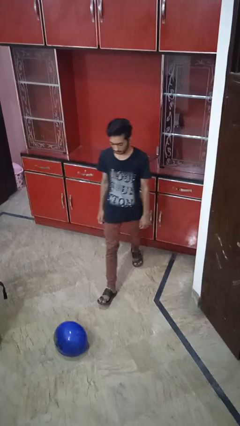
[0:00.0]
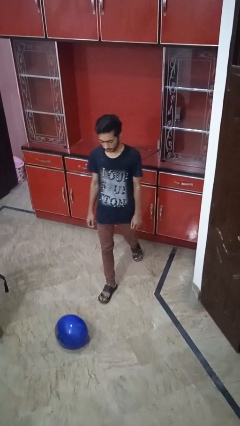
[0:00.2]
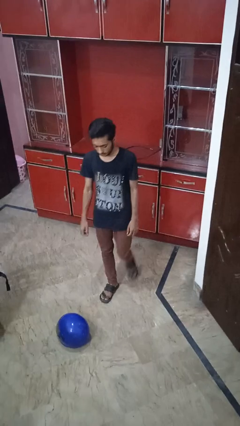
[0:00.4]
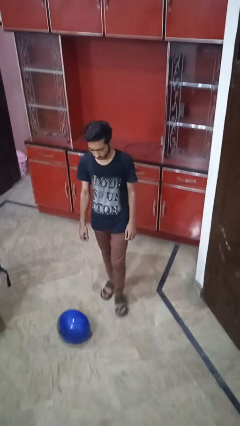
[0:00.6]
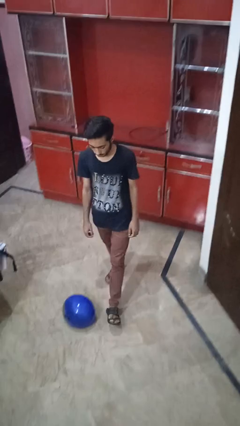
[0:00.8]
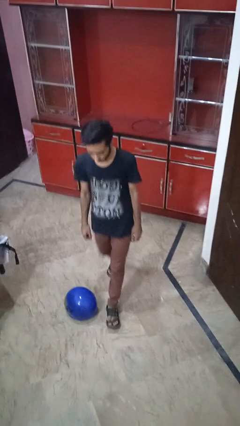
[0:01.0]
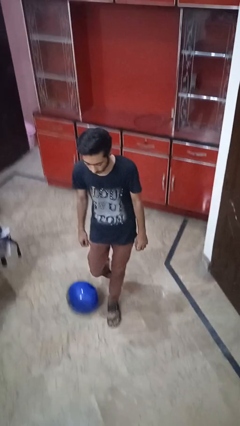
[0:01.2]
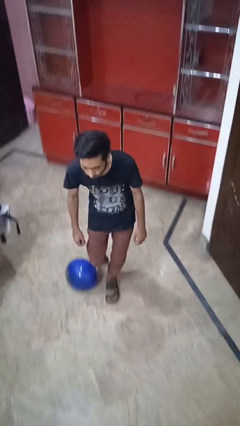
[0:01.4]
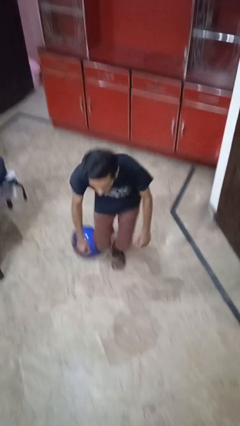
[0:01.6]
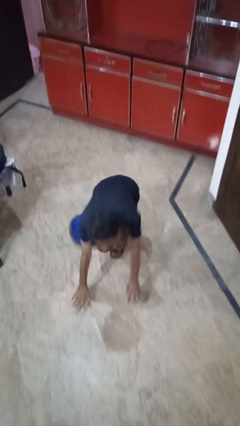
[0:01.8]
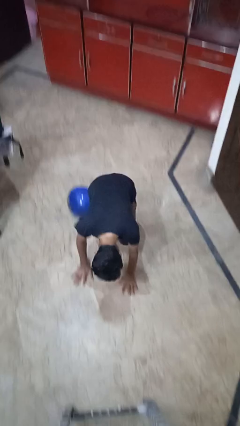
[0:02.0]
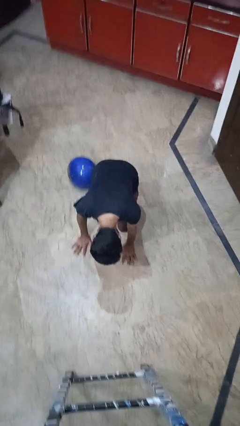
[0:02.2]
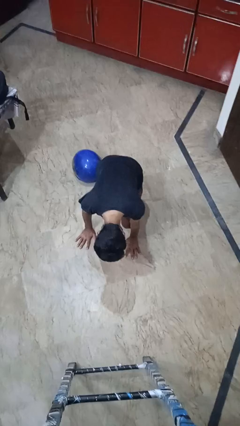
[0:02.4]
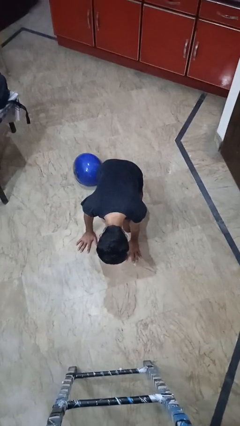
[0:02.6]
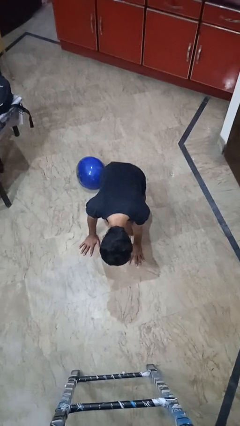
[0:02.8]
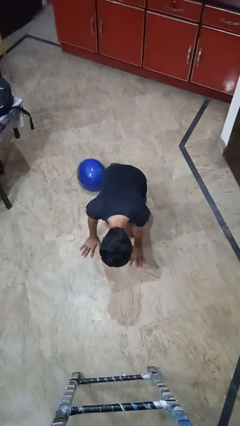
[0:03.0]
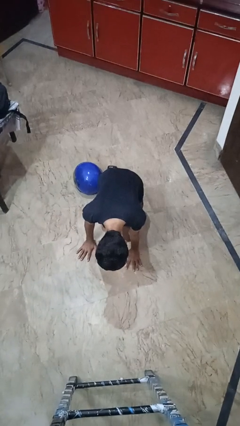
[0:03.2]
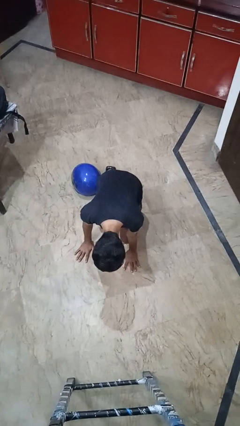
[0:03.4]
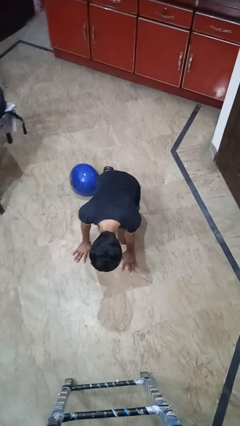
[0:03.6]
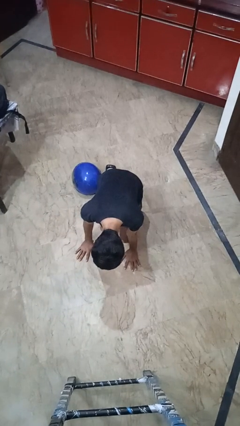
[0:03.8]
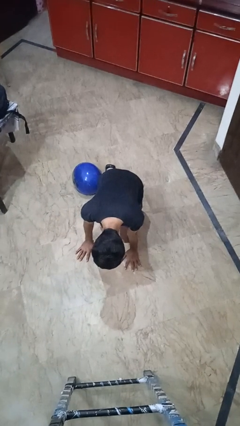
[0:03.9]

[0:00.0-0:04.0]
person takes phone from pocket

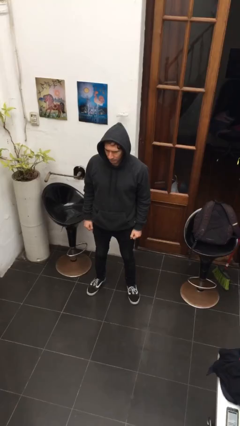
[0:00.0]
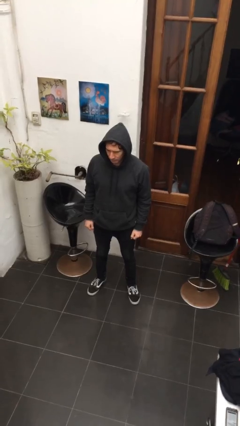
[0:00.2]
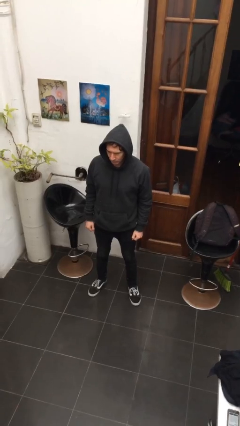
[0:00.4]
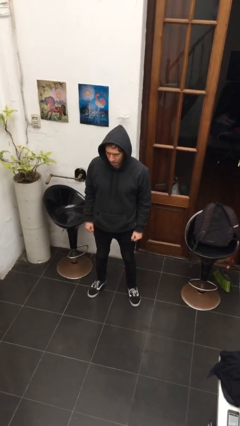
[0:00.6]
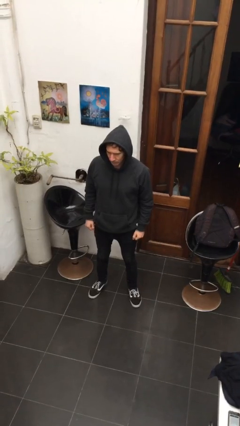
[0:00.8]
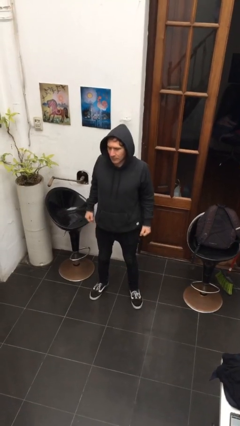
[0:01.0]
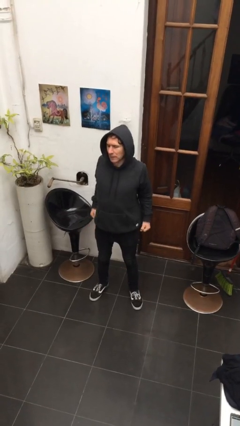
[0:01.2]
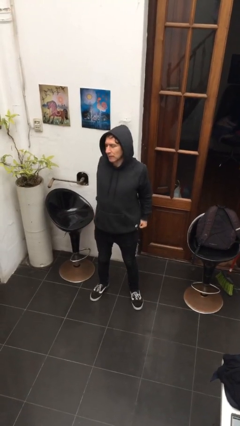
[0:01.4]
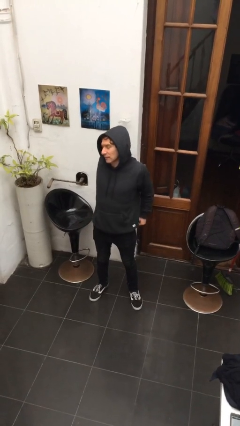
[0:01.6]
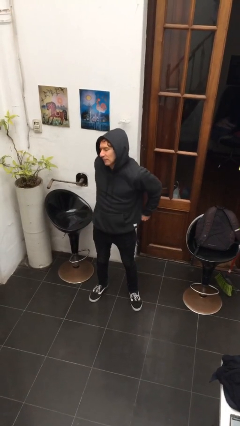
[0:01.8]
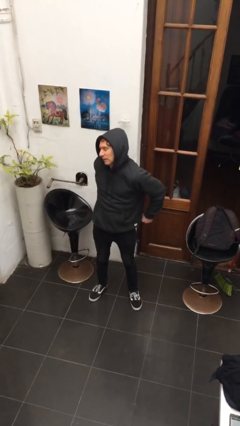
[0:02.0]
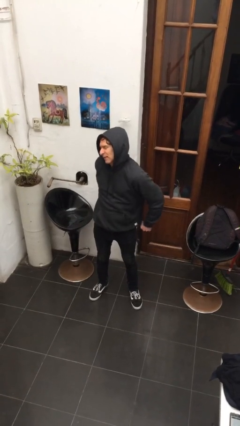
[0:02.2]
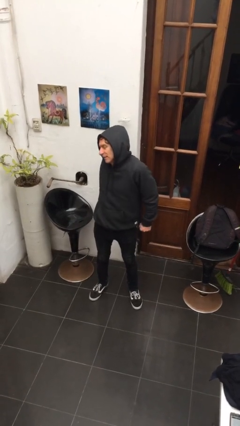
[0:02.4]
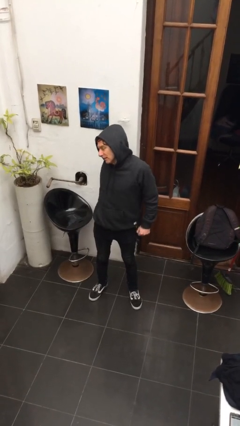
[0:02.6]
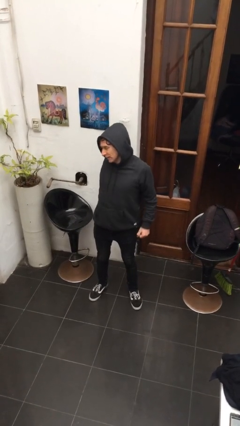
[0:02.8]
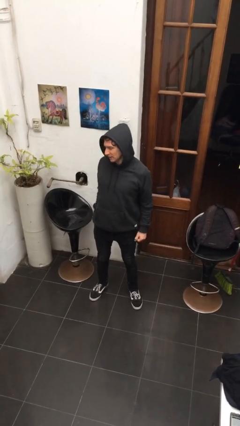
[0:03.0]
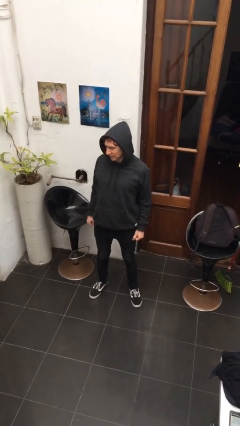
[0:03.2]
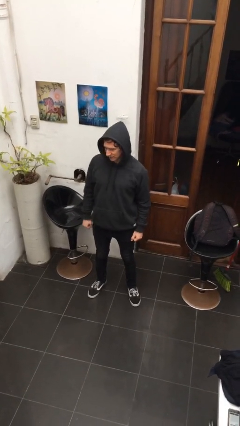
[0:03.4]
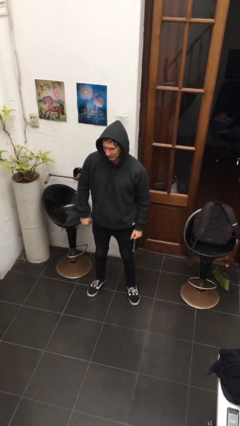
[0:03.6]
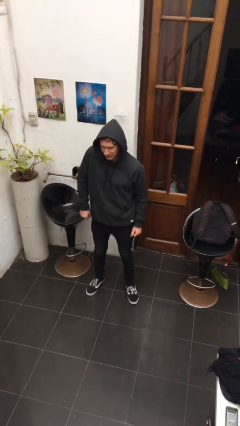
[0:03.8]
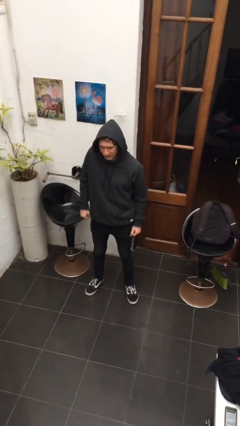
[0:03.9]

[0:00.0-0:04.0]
person stretches back

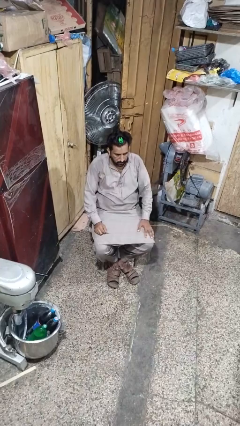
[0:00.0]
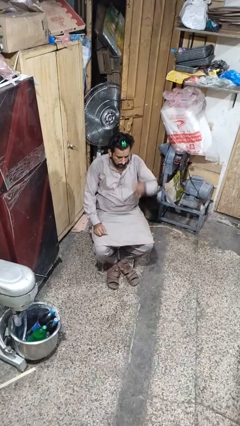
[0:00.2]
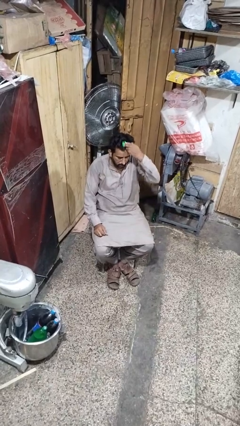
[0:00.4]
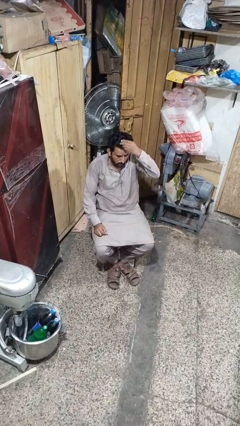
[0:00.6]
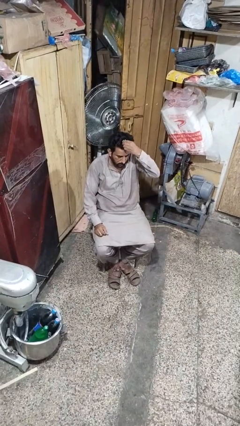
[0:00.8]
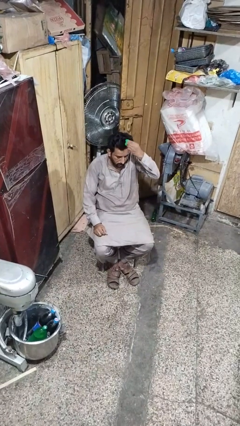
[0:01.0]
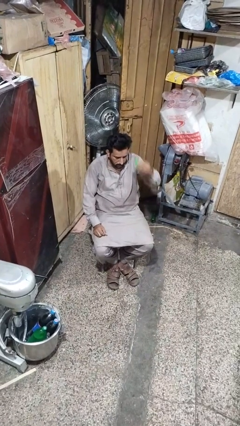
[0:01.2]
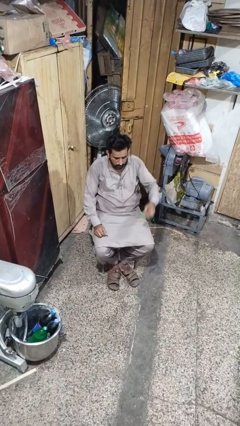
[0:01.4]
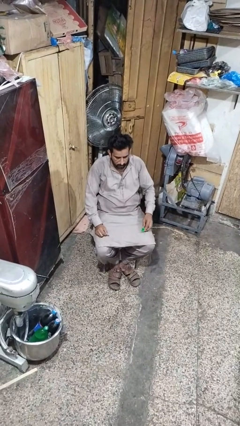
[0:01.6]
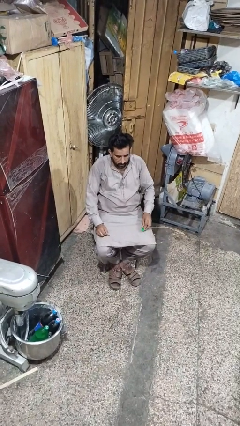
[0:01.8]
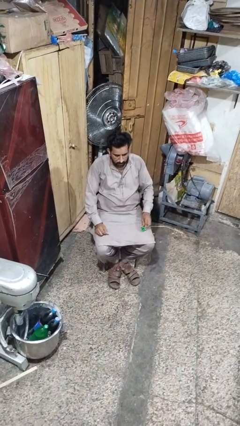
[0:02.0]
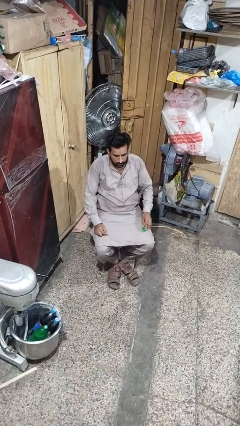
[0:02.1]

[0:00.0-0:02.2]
person takes off hairtie

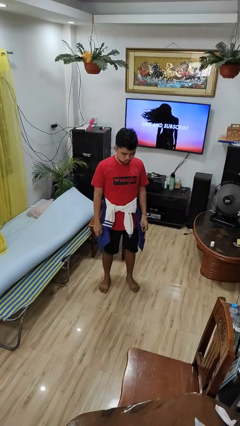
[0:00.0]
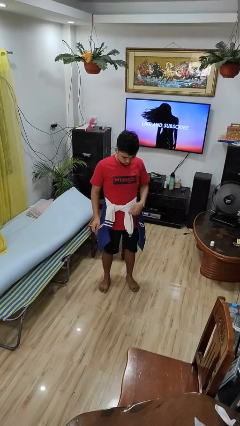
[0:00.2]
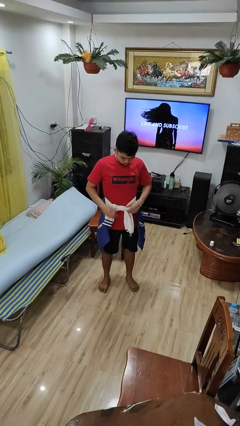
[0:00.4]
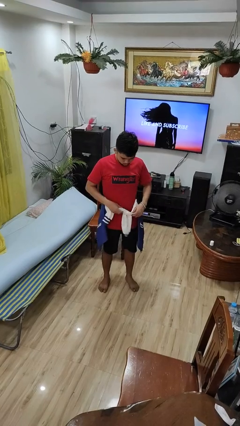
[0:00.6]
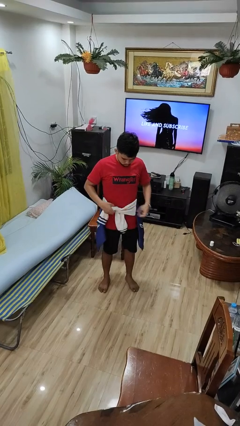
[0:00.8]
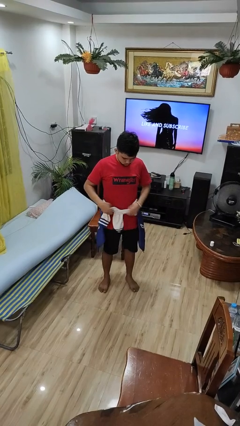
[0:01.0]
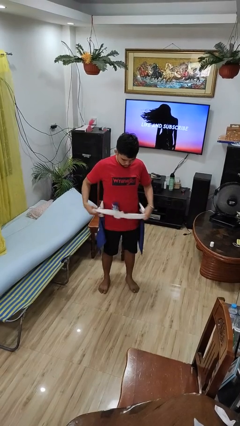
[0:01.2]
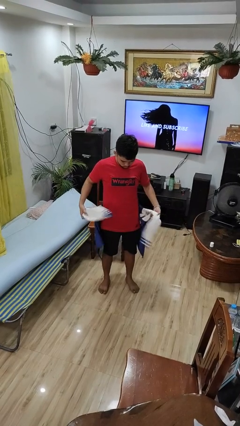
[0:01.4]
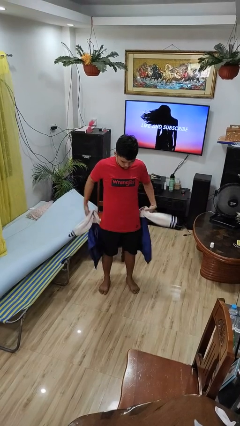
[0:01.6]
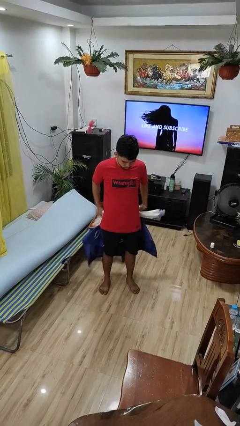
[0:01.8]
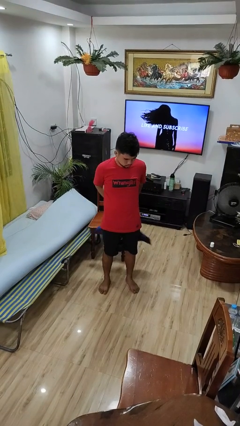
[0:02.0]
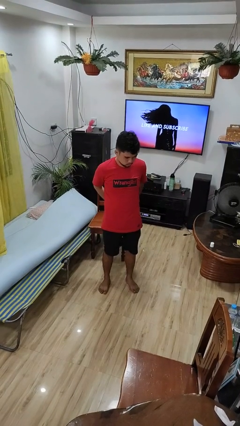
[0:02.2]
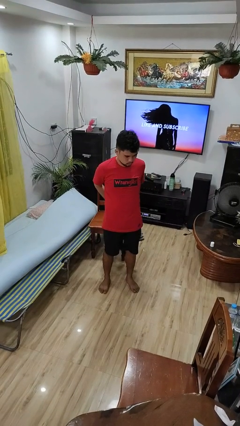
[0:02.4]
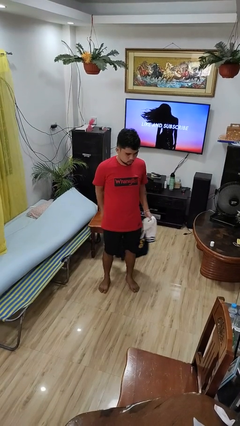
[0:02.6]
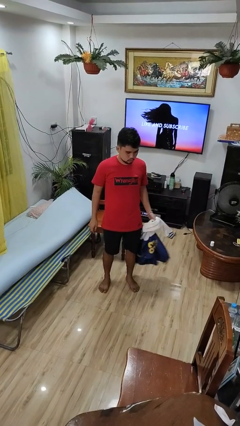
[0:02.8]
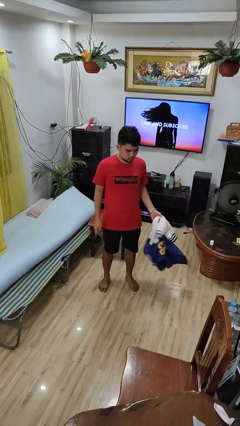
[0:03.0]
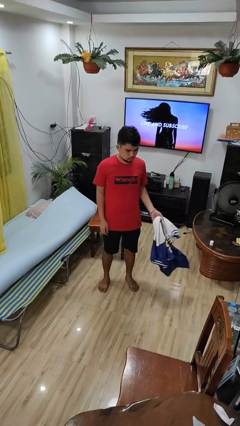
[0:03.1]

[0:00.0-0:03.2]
person unties jacket around waist

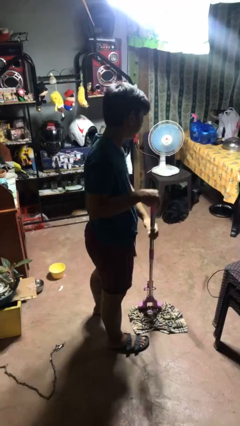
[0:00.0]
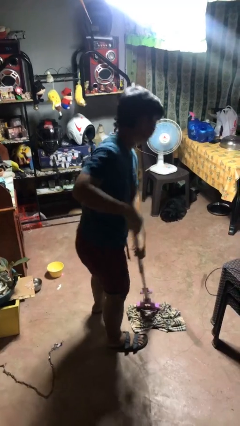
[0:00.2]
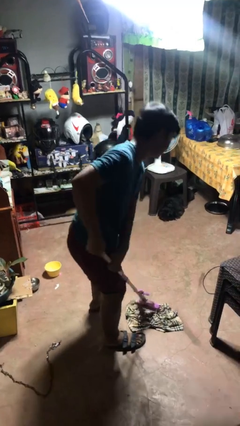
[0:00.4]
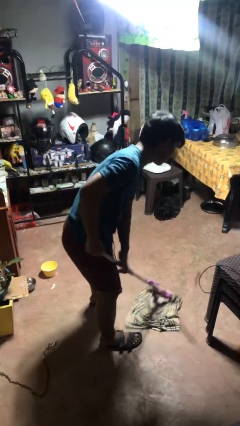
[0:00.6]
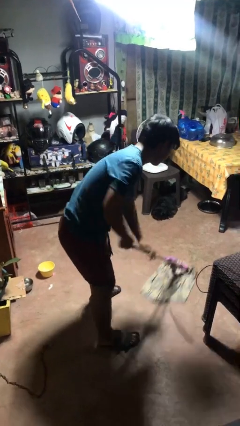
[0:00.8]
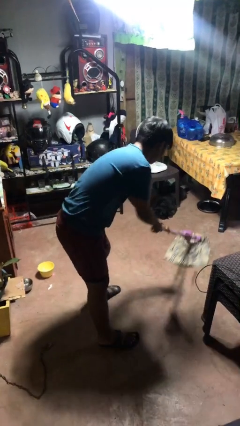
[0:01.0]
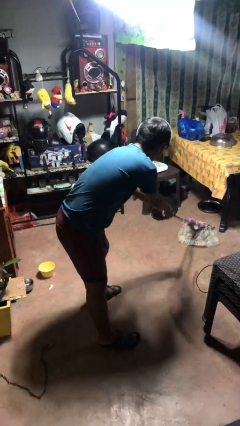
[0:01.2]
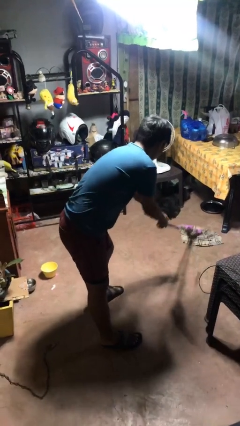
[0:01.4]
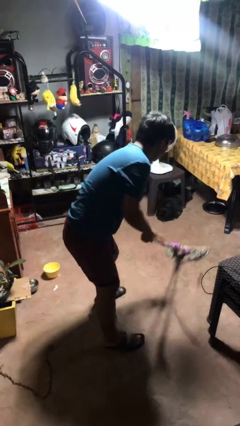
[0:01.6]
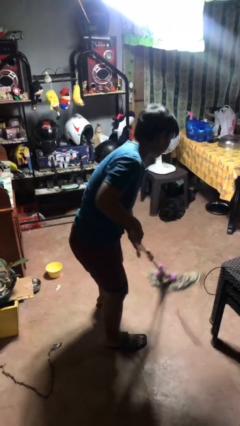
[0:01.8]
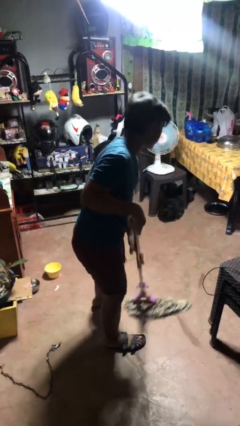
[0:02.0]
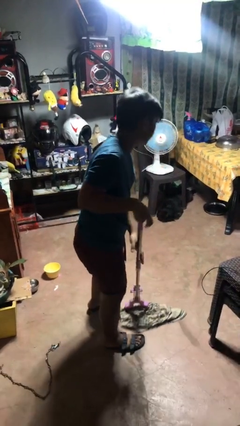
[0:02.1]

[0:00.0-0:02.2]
person mops

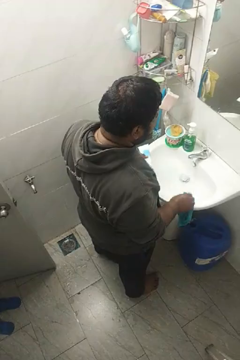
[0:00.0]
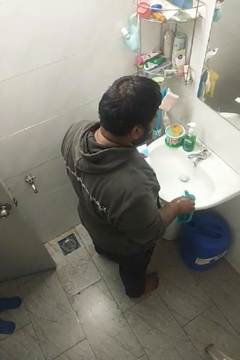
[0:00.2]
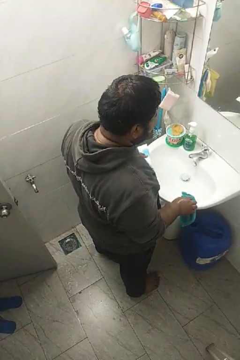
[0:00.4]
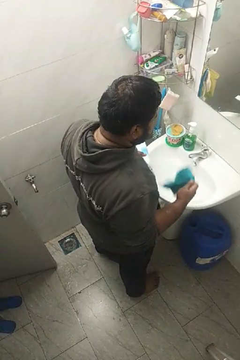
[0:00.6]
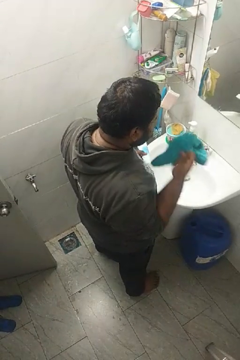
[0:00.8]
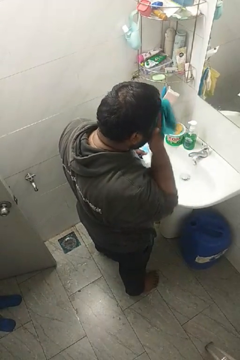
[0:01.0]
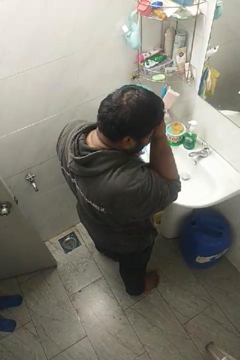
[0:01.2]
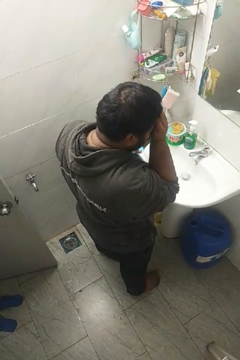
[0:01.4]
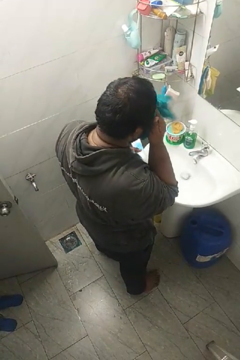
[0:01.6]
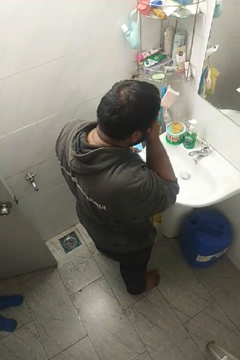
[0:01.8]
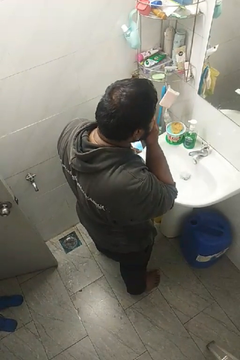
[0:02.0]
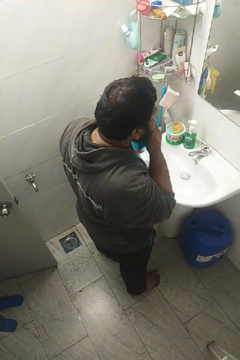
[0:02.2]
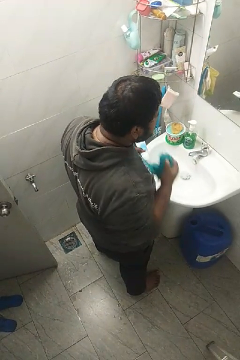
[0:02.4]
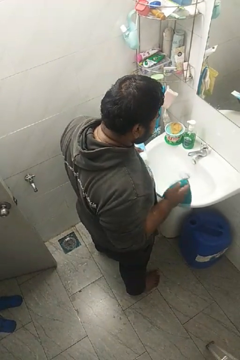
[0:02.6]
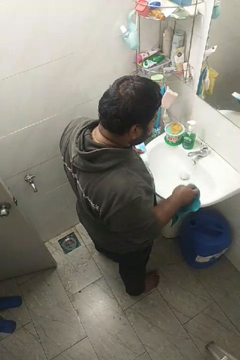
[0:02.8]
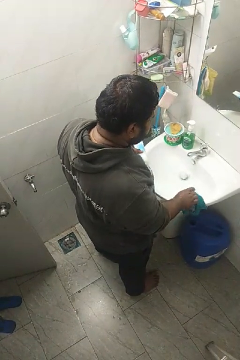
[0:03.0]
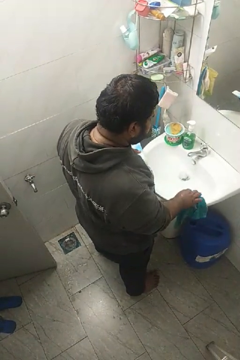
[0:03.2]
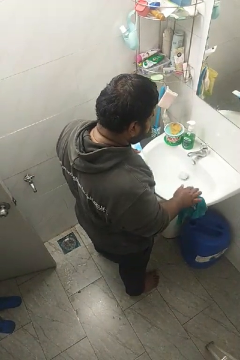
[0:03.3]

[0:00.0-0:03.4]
person dries face with towel
